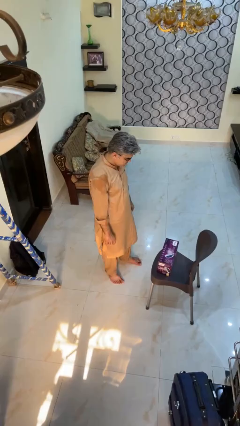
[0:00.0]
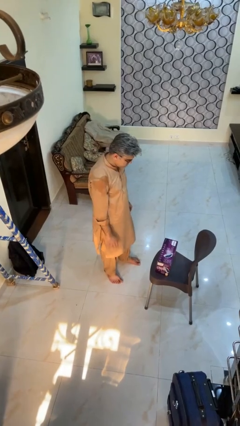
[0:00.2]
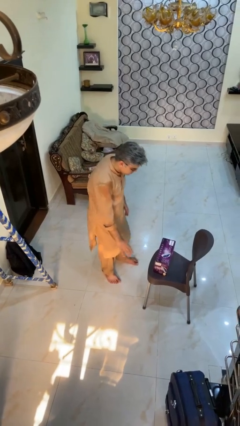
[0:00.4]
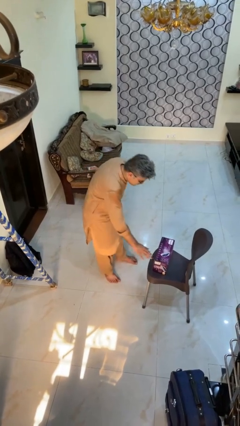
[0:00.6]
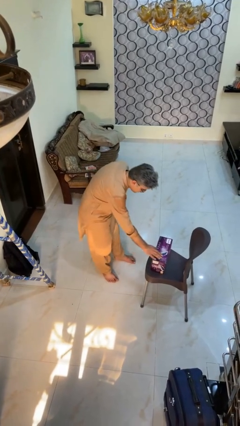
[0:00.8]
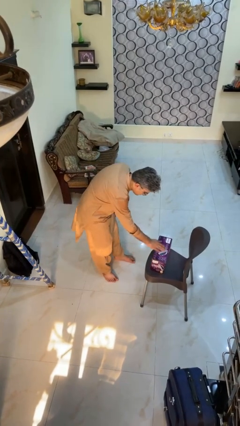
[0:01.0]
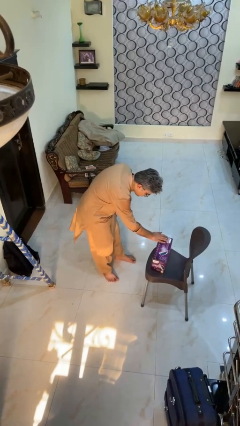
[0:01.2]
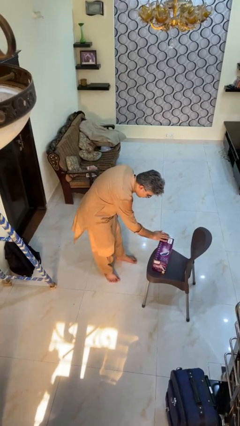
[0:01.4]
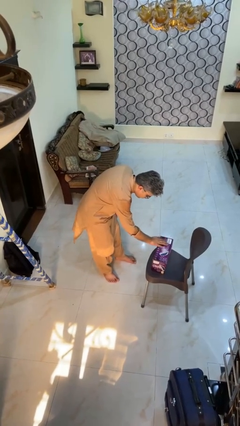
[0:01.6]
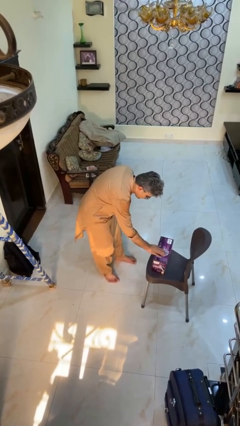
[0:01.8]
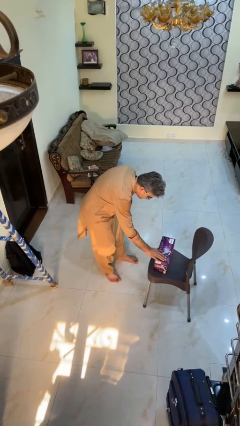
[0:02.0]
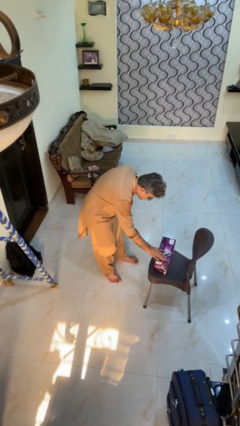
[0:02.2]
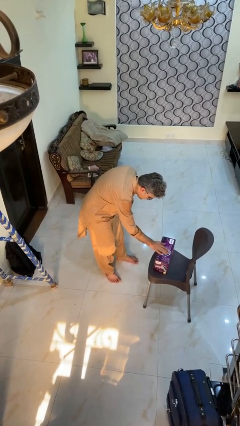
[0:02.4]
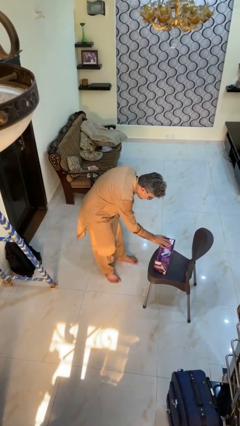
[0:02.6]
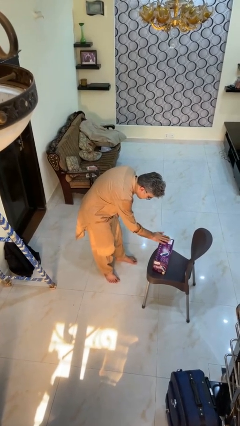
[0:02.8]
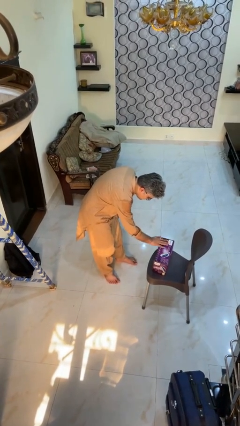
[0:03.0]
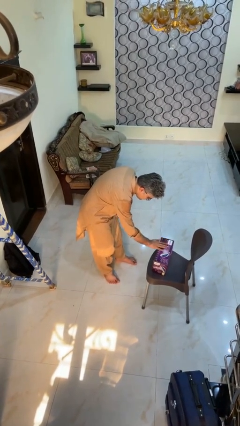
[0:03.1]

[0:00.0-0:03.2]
person waves hand over object

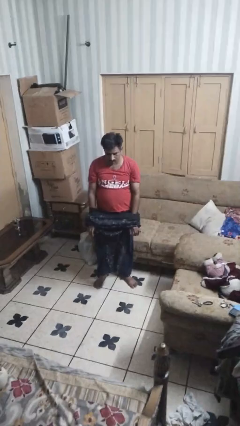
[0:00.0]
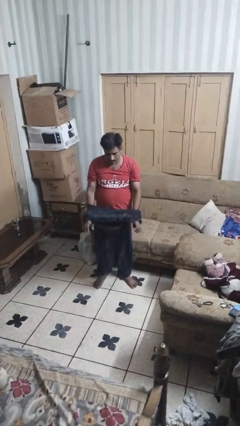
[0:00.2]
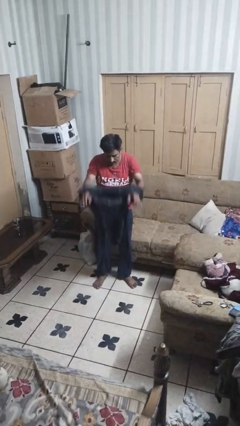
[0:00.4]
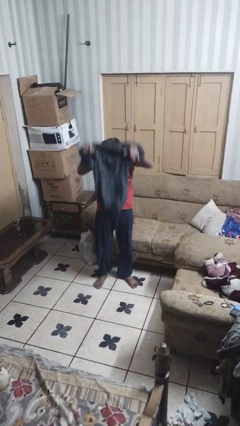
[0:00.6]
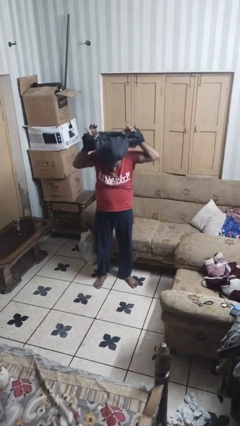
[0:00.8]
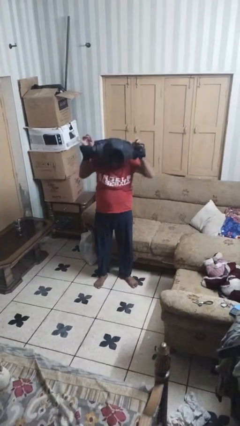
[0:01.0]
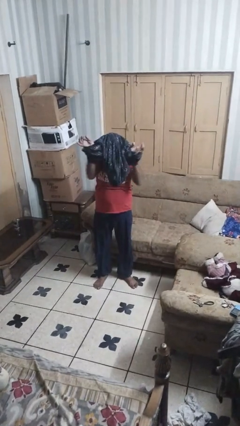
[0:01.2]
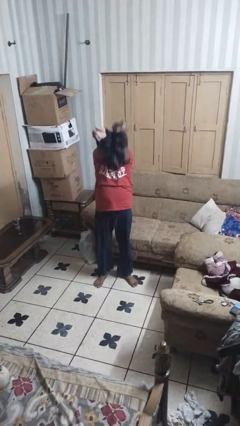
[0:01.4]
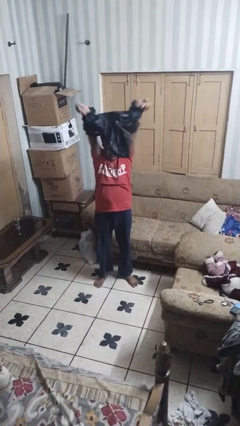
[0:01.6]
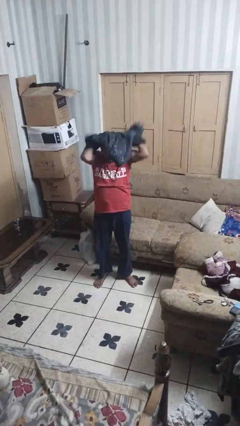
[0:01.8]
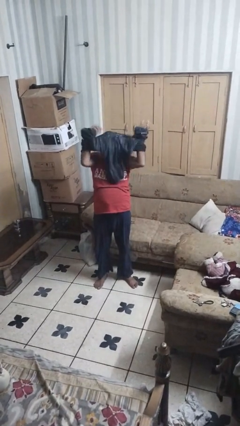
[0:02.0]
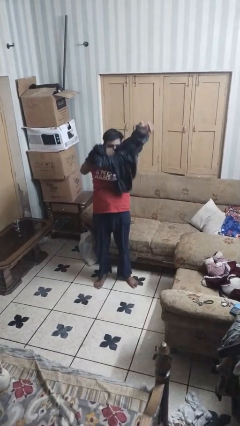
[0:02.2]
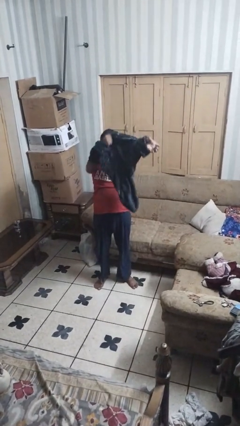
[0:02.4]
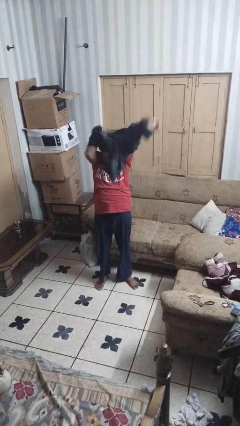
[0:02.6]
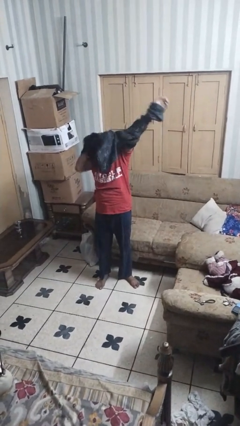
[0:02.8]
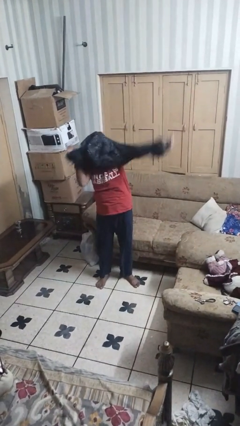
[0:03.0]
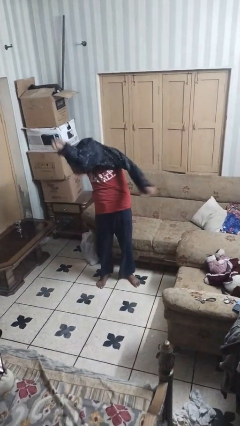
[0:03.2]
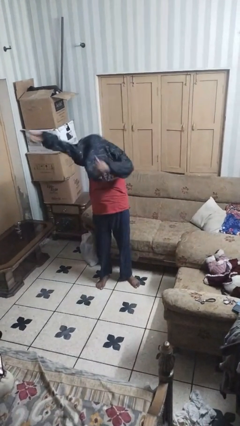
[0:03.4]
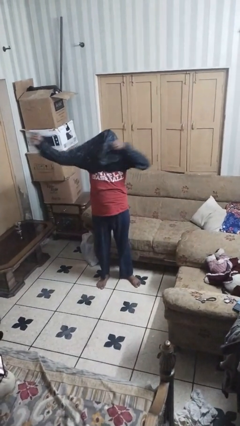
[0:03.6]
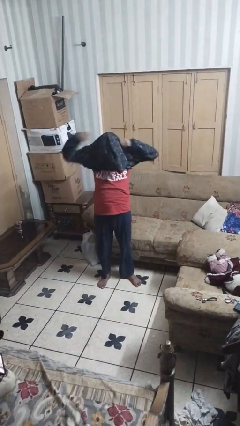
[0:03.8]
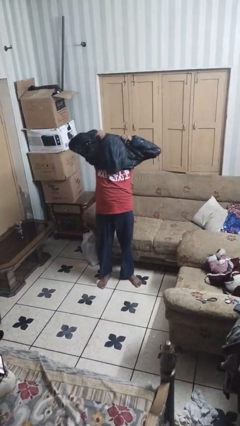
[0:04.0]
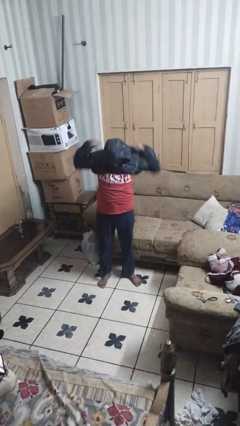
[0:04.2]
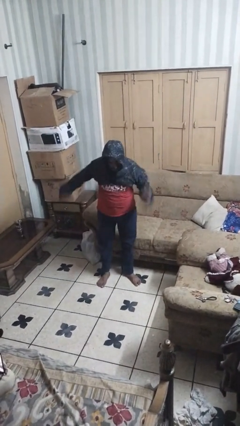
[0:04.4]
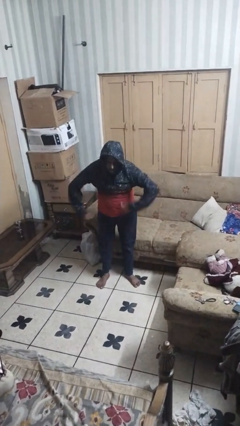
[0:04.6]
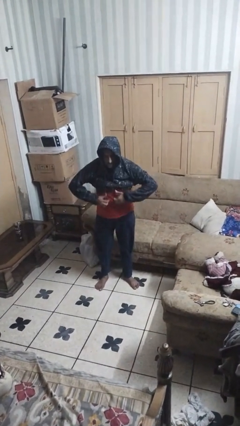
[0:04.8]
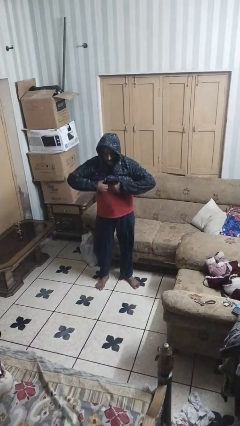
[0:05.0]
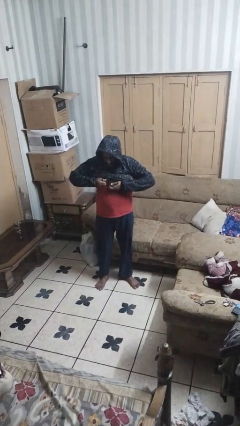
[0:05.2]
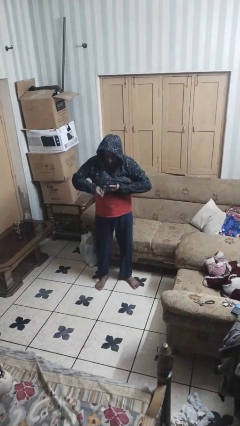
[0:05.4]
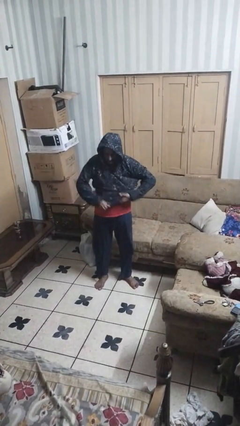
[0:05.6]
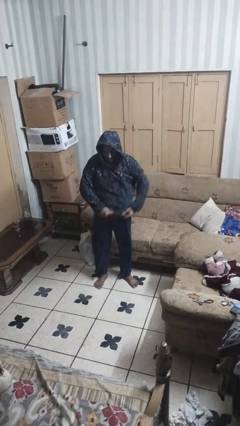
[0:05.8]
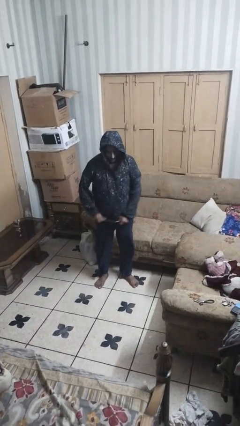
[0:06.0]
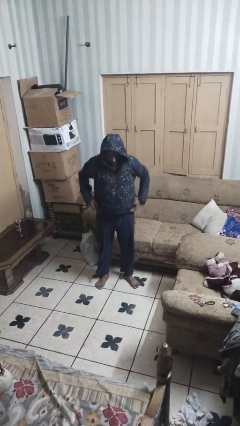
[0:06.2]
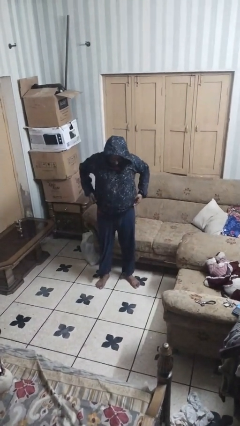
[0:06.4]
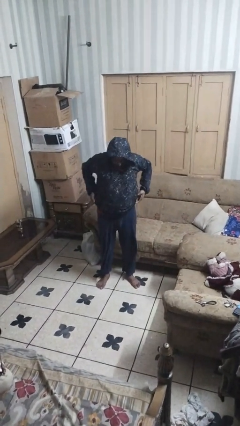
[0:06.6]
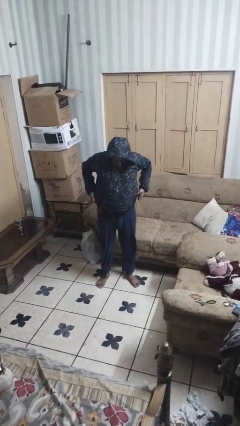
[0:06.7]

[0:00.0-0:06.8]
person puts on hoodie

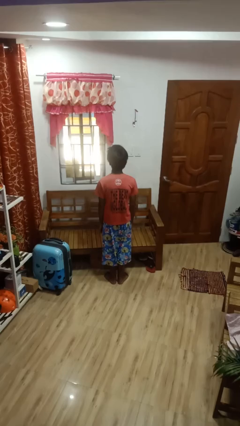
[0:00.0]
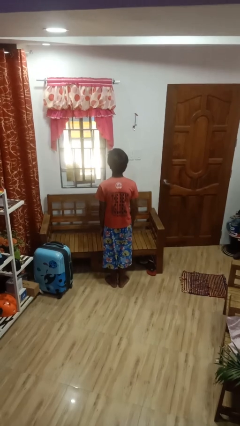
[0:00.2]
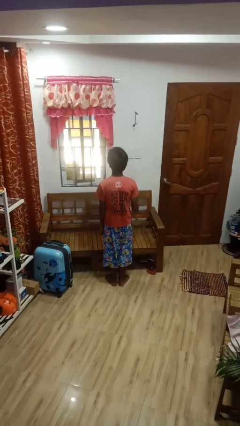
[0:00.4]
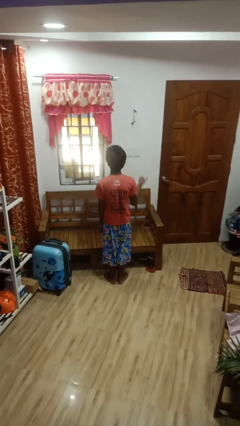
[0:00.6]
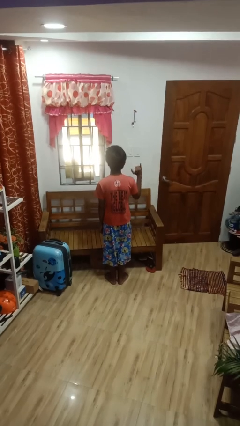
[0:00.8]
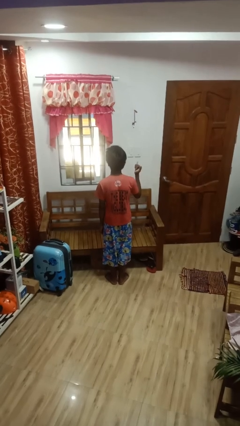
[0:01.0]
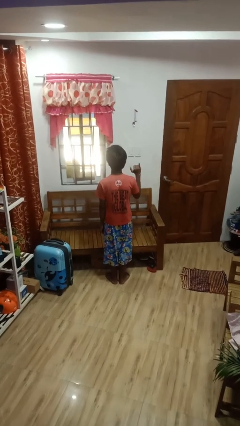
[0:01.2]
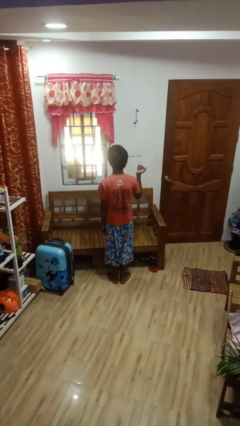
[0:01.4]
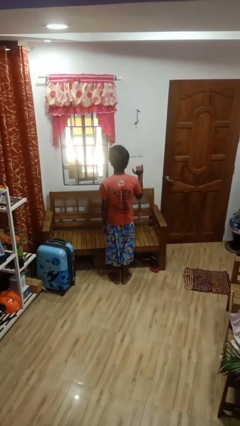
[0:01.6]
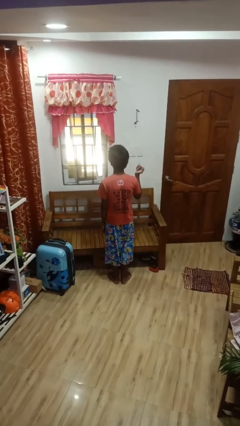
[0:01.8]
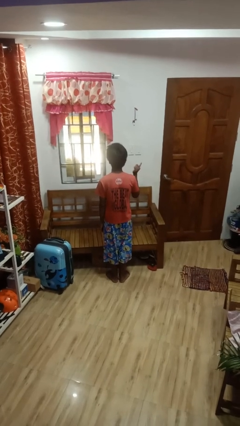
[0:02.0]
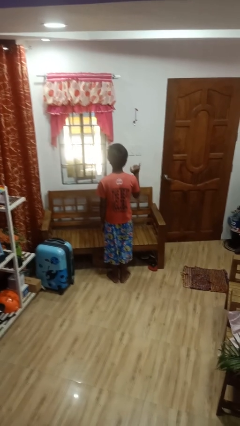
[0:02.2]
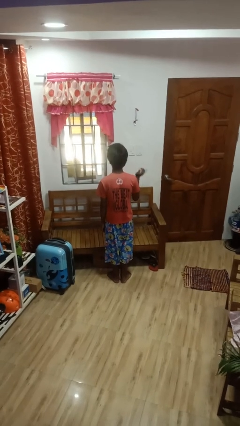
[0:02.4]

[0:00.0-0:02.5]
person gestures hang loose

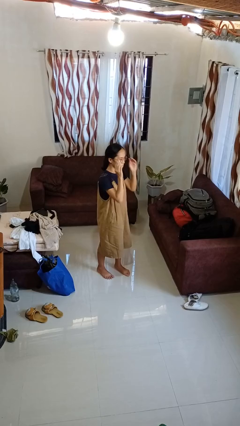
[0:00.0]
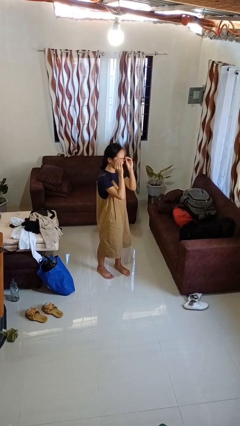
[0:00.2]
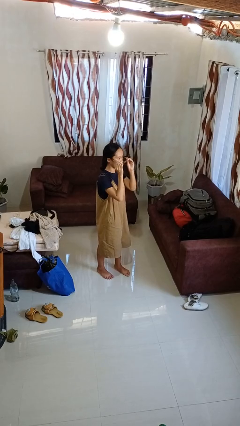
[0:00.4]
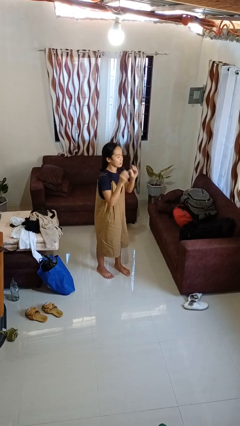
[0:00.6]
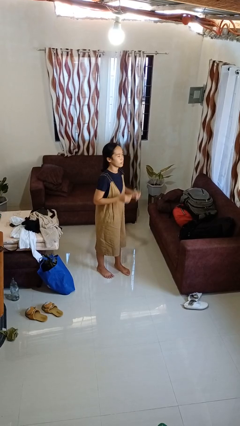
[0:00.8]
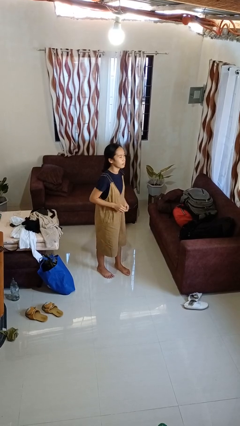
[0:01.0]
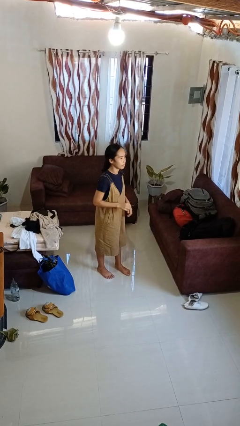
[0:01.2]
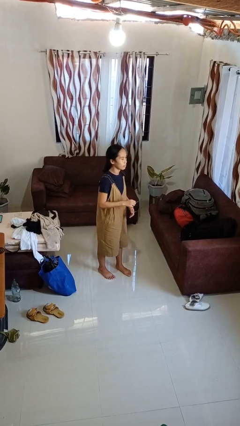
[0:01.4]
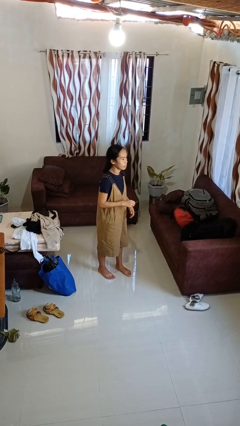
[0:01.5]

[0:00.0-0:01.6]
person takes off glasses

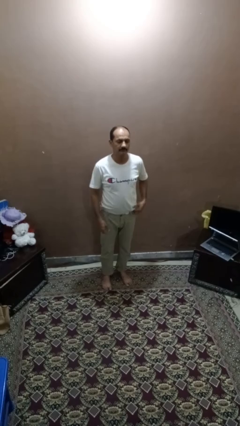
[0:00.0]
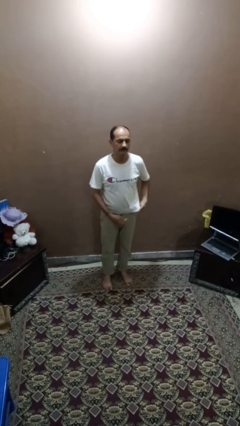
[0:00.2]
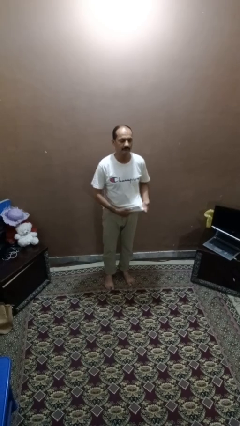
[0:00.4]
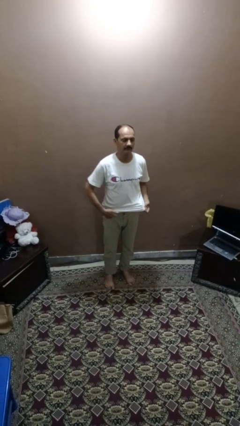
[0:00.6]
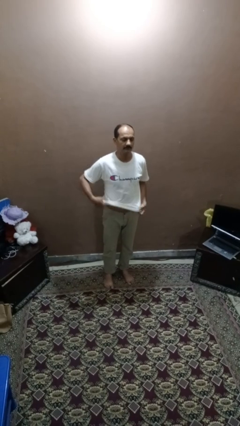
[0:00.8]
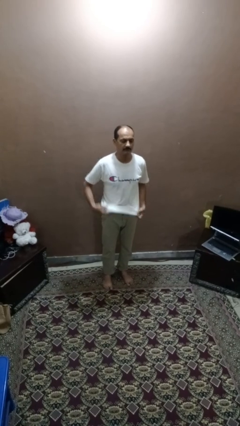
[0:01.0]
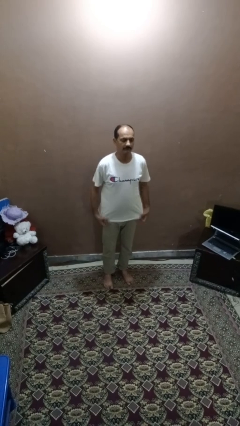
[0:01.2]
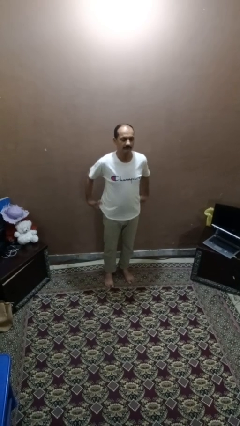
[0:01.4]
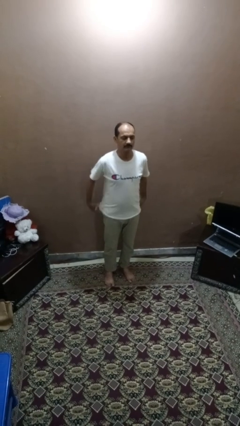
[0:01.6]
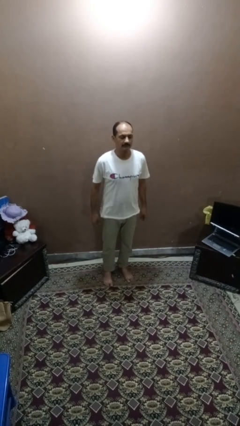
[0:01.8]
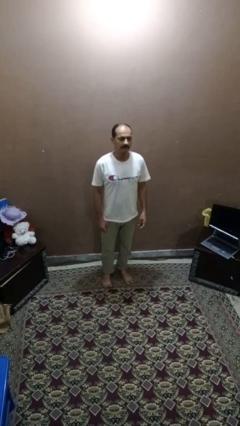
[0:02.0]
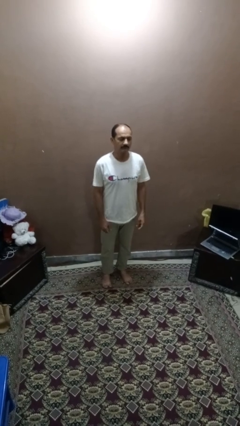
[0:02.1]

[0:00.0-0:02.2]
person untucks shirt

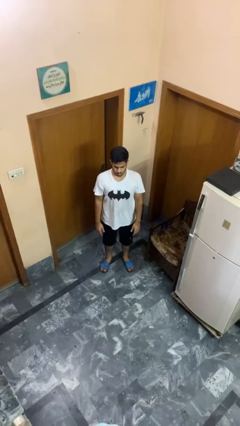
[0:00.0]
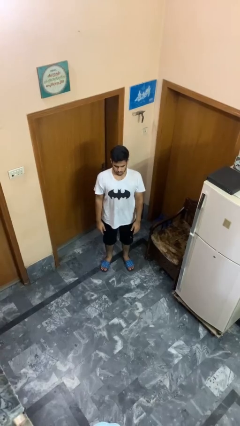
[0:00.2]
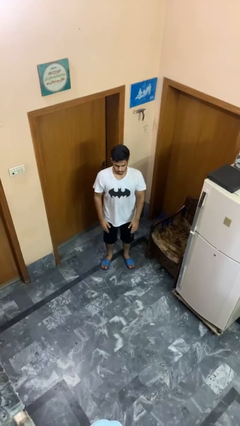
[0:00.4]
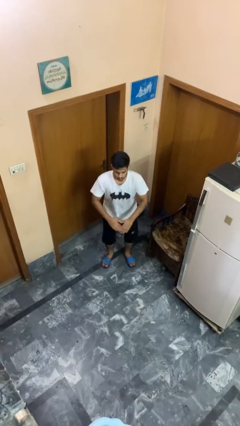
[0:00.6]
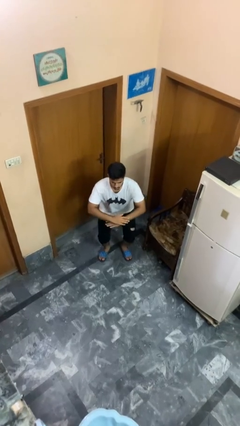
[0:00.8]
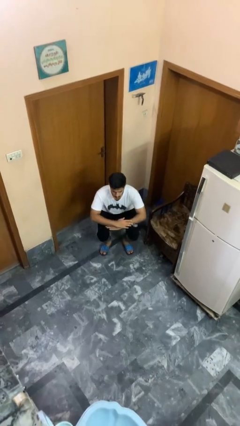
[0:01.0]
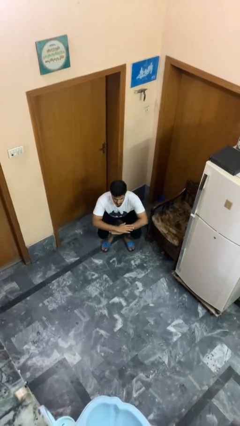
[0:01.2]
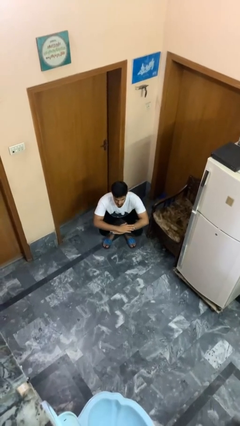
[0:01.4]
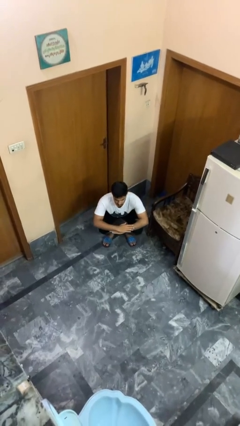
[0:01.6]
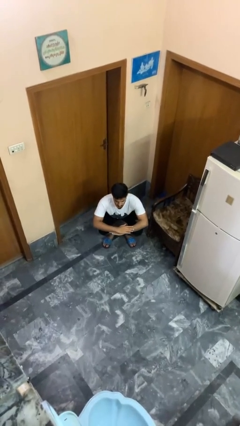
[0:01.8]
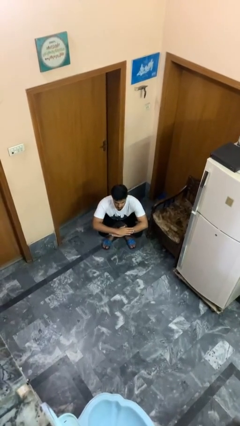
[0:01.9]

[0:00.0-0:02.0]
person squats
